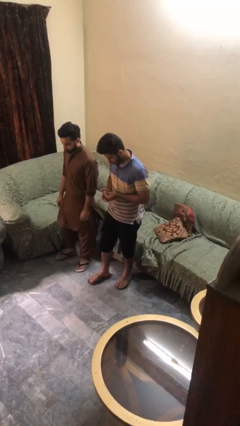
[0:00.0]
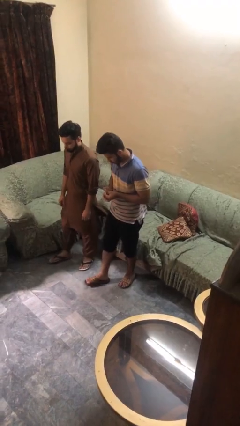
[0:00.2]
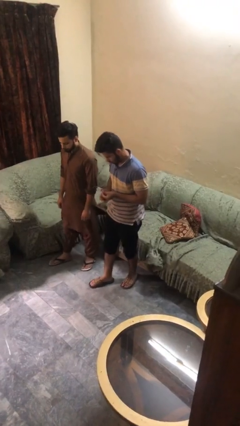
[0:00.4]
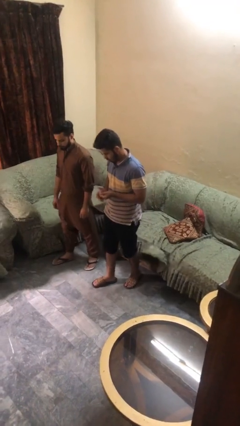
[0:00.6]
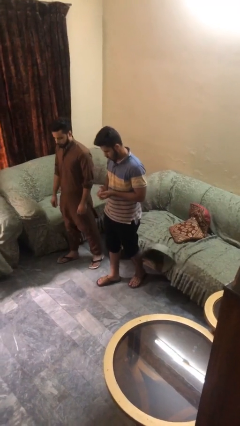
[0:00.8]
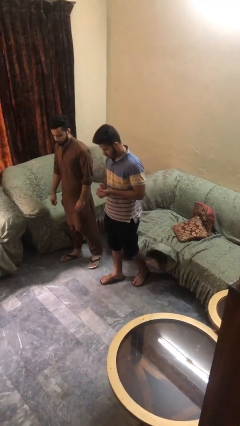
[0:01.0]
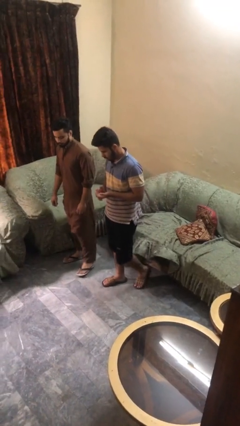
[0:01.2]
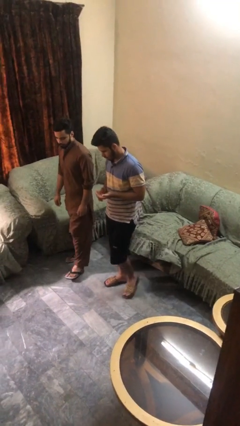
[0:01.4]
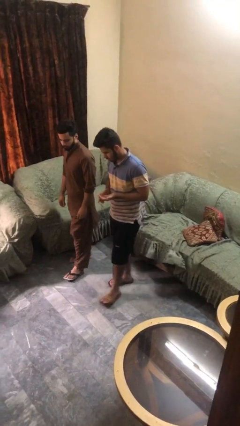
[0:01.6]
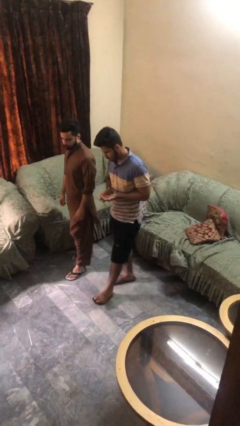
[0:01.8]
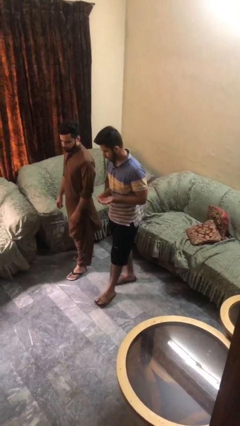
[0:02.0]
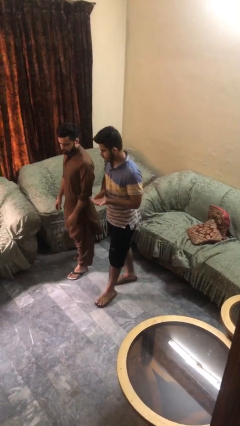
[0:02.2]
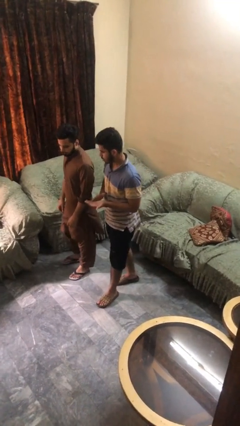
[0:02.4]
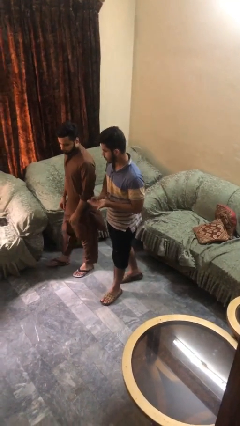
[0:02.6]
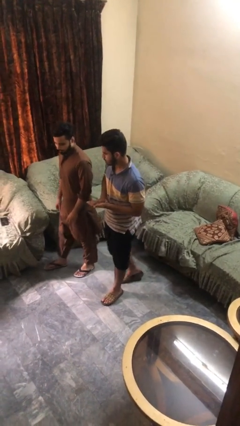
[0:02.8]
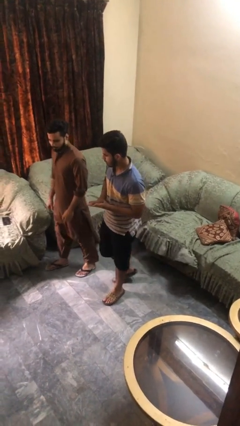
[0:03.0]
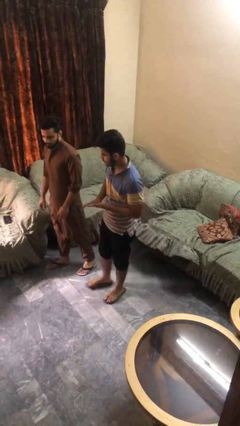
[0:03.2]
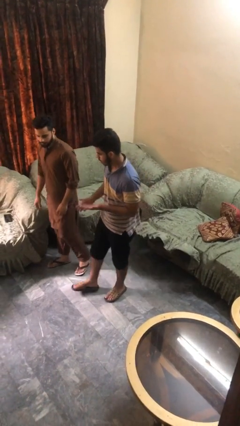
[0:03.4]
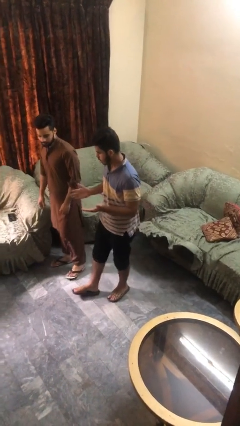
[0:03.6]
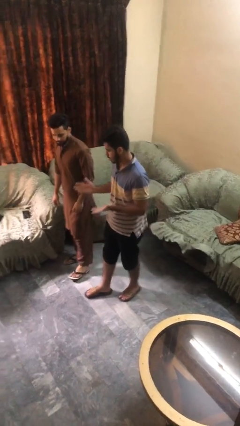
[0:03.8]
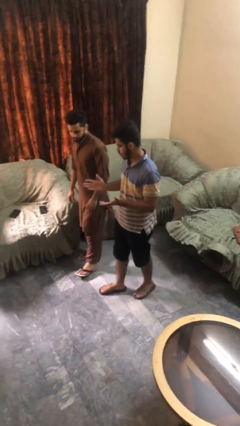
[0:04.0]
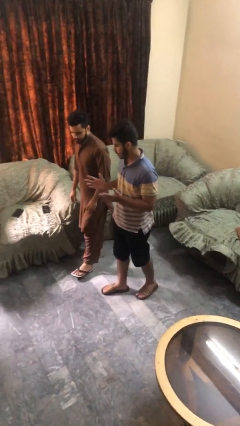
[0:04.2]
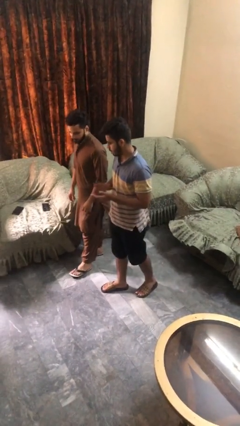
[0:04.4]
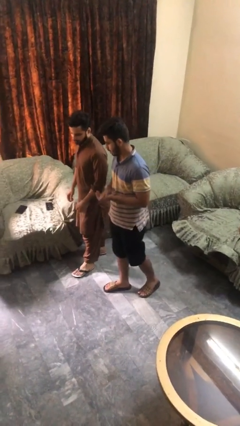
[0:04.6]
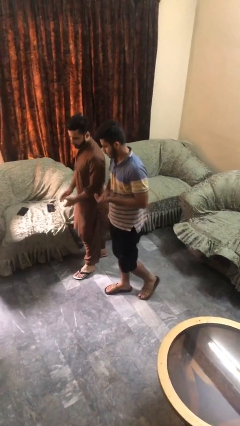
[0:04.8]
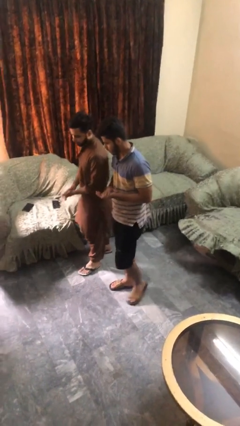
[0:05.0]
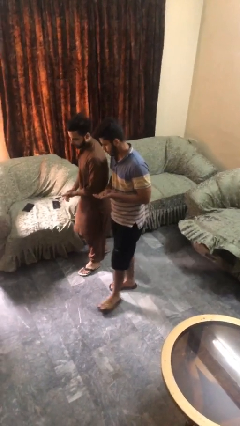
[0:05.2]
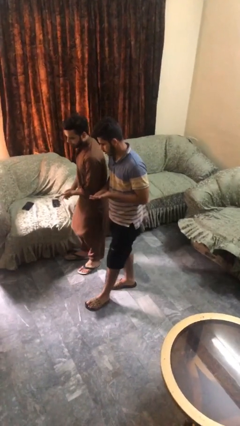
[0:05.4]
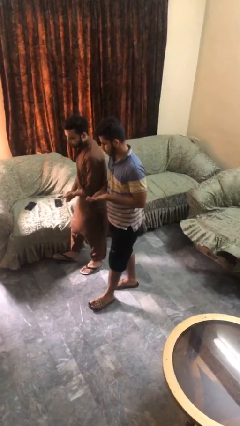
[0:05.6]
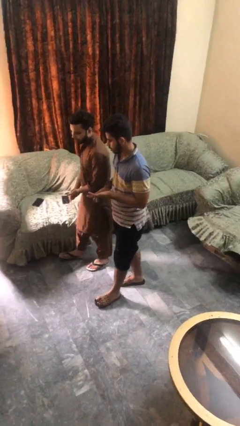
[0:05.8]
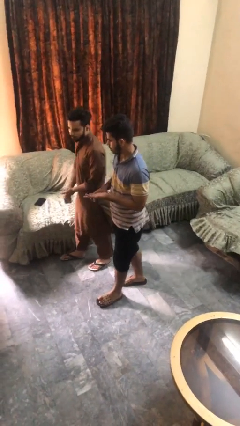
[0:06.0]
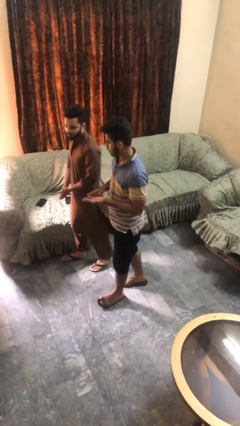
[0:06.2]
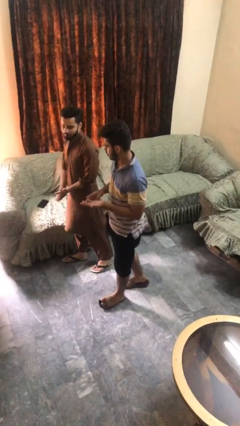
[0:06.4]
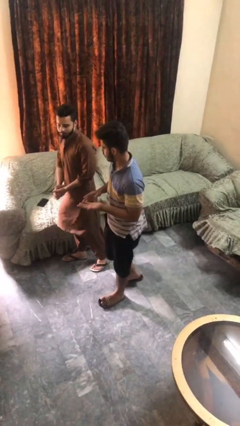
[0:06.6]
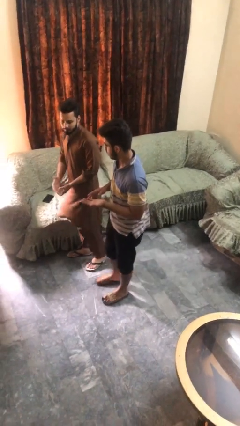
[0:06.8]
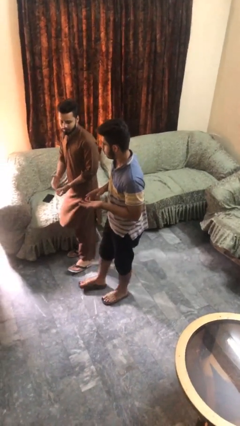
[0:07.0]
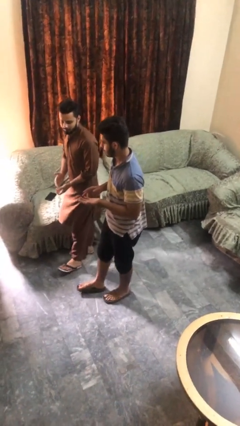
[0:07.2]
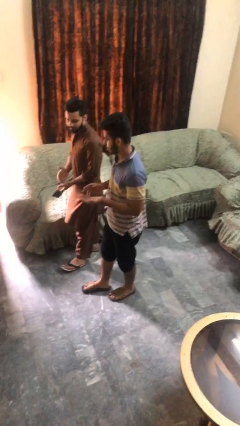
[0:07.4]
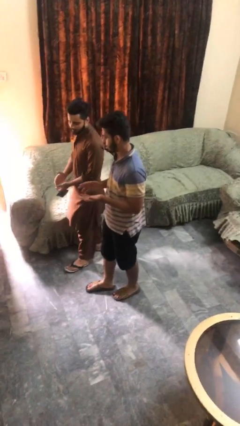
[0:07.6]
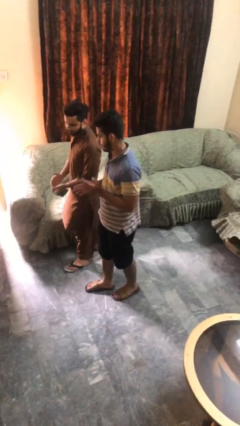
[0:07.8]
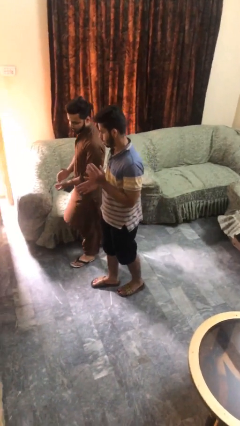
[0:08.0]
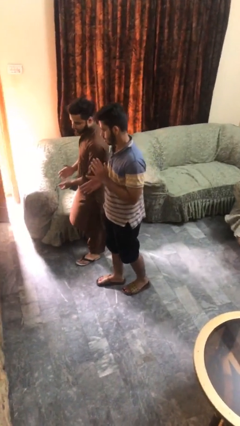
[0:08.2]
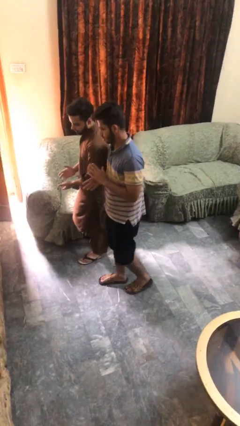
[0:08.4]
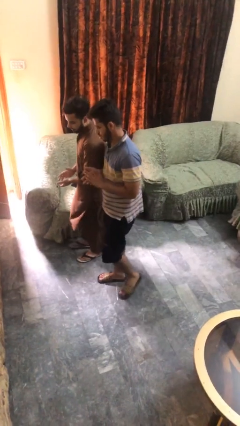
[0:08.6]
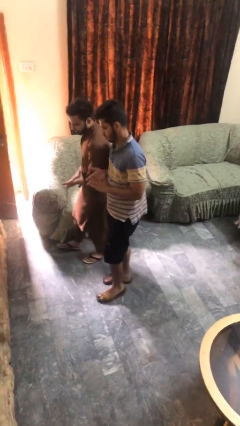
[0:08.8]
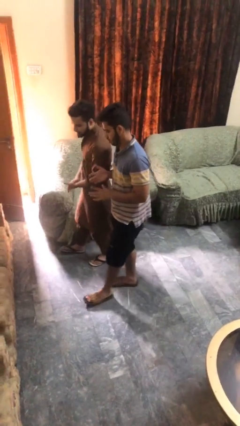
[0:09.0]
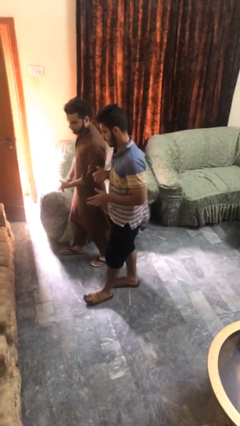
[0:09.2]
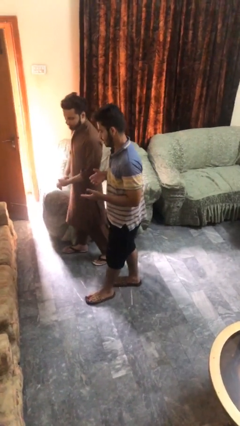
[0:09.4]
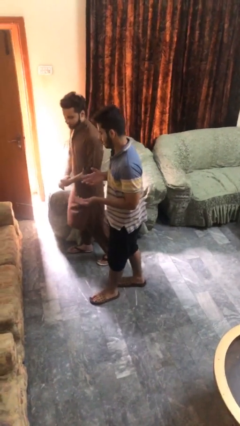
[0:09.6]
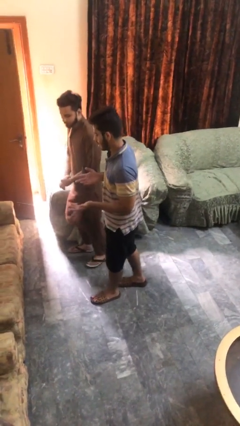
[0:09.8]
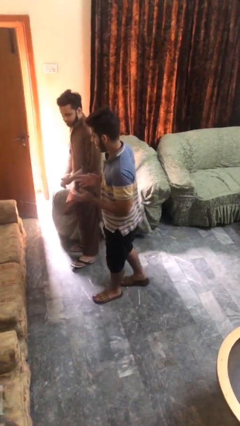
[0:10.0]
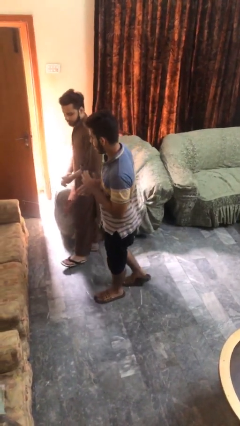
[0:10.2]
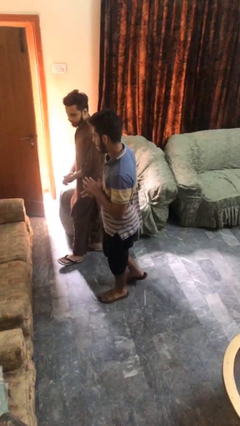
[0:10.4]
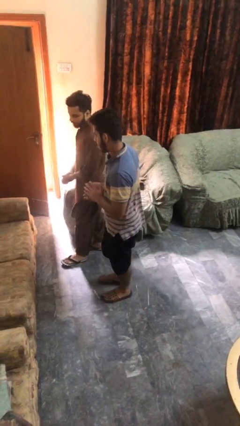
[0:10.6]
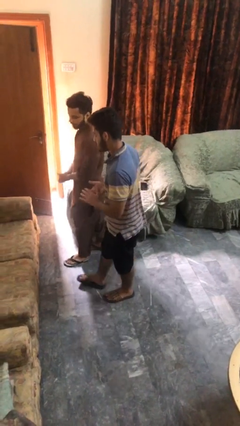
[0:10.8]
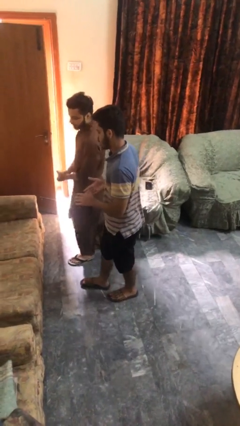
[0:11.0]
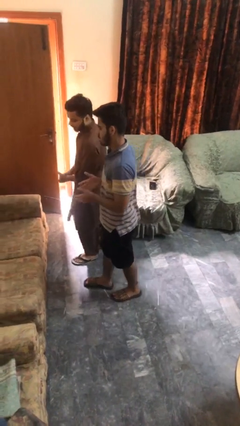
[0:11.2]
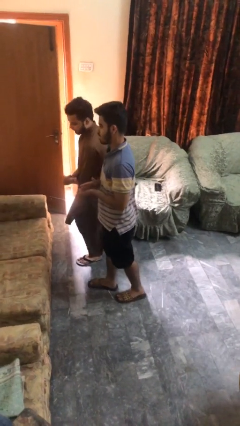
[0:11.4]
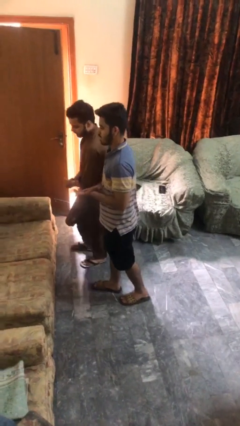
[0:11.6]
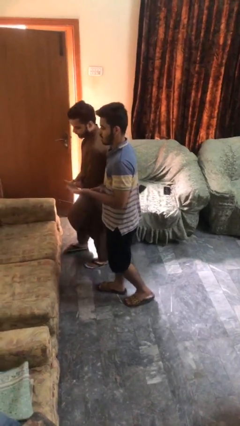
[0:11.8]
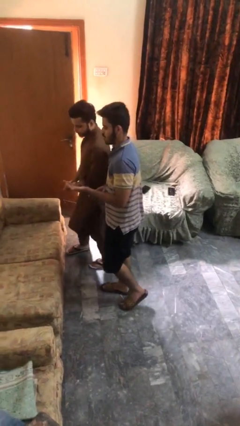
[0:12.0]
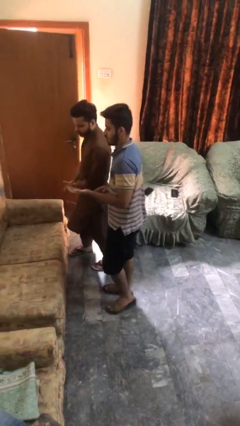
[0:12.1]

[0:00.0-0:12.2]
person talks to person

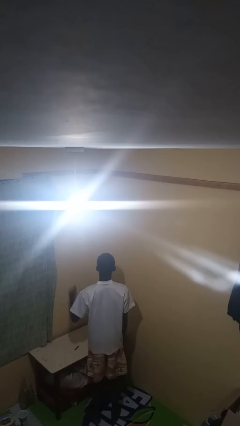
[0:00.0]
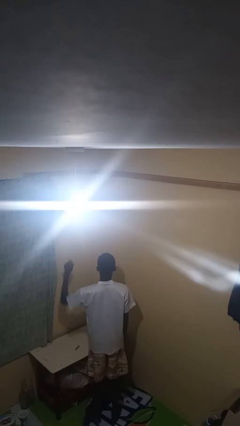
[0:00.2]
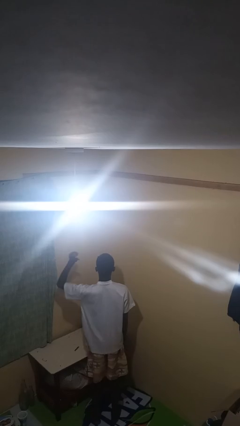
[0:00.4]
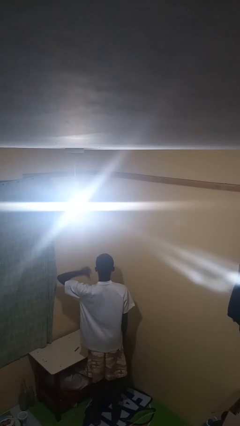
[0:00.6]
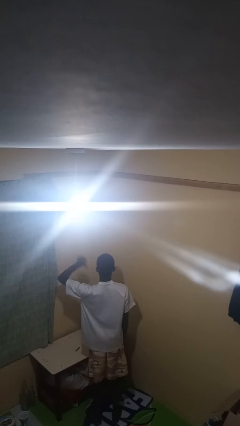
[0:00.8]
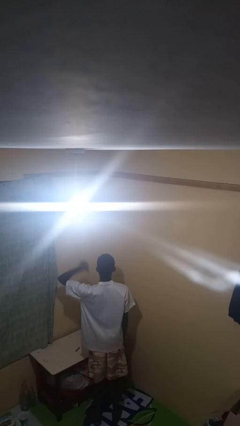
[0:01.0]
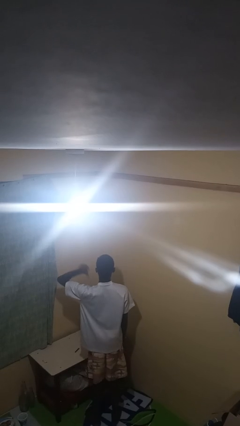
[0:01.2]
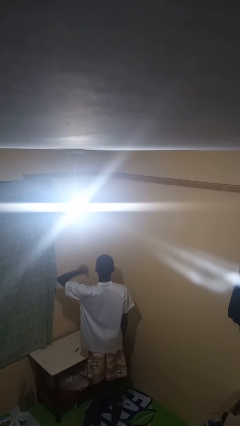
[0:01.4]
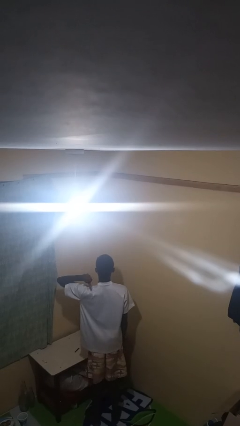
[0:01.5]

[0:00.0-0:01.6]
person gestures behind me

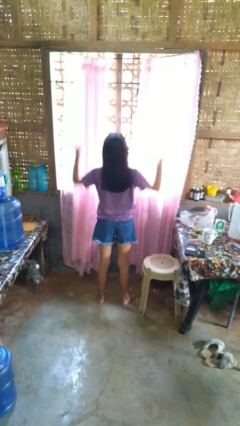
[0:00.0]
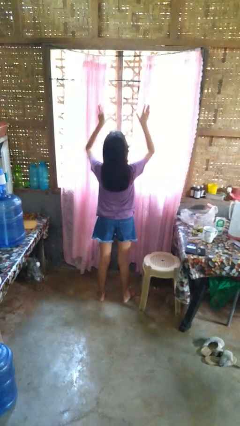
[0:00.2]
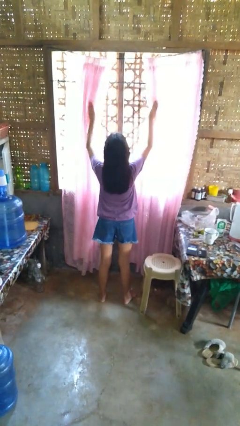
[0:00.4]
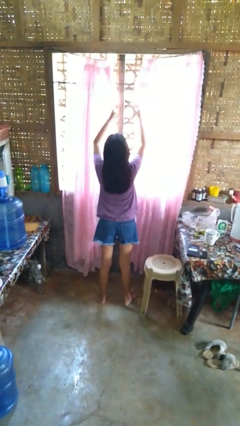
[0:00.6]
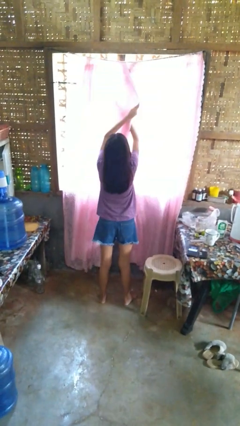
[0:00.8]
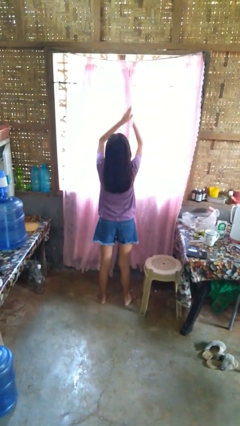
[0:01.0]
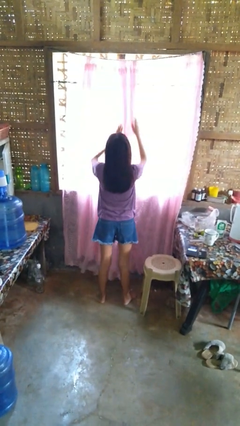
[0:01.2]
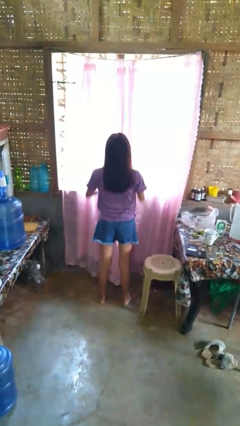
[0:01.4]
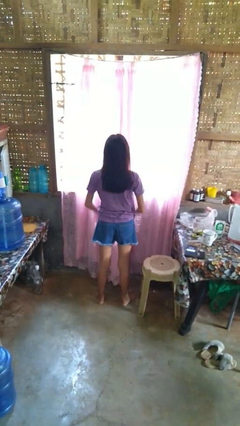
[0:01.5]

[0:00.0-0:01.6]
person closes curtains

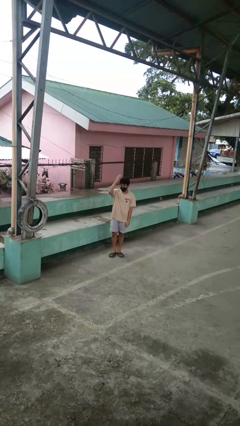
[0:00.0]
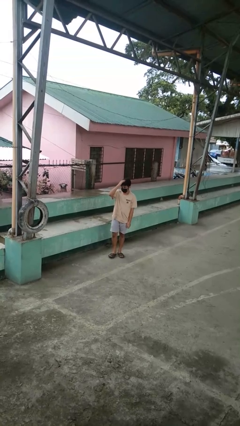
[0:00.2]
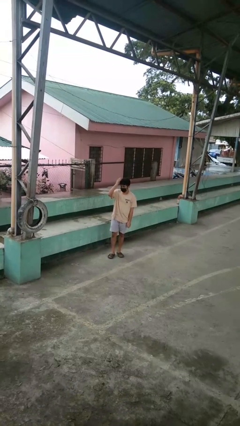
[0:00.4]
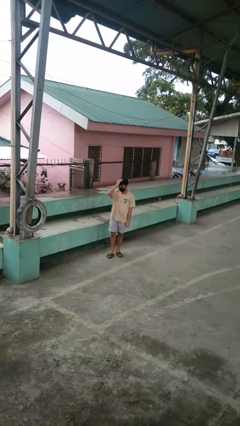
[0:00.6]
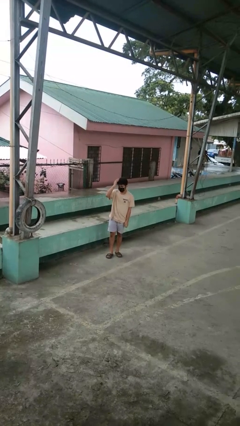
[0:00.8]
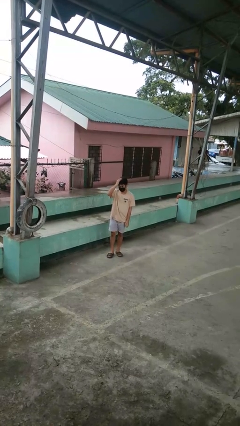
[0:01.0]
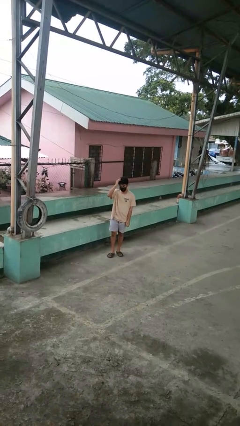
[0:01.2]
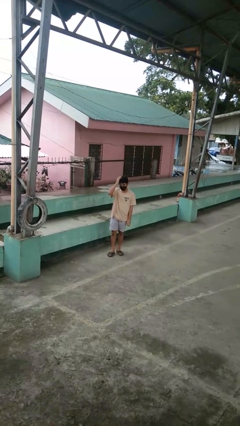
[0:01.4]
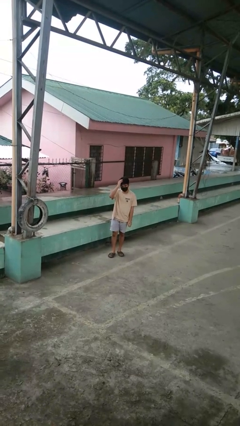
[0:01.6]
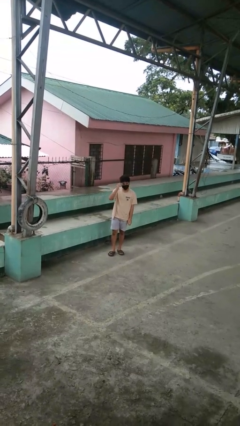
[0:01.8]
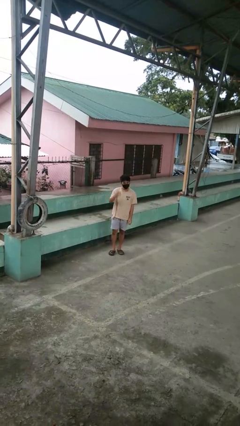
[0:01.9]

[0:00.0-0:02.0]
person pats head

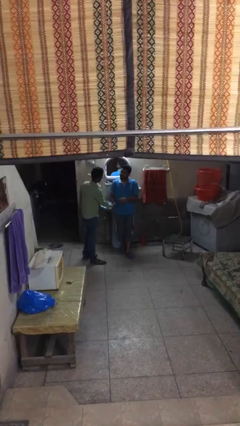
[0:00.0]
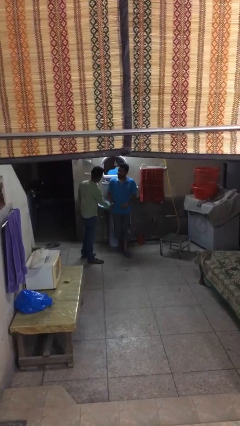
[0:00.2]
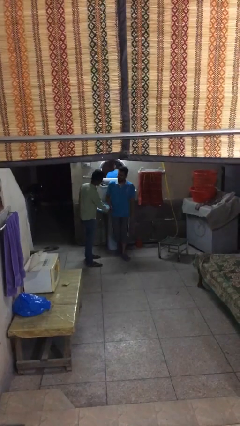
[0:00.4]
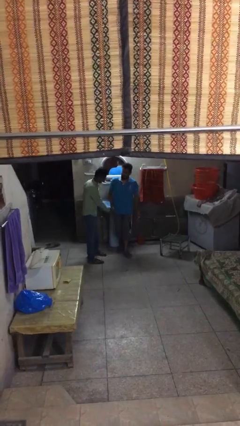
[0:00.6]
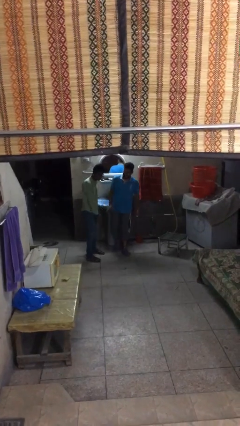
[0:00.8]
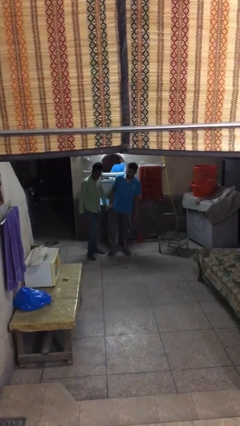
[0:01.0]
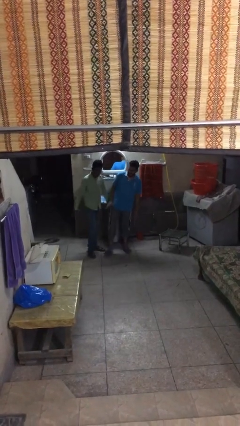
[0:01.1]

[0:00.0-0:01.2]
person shakes hand
